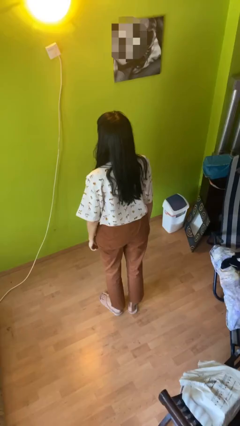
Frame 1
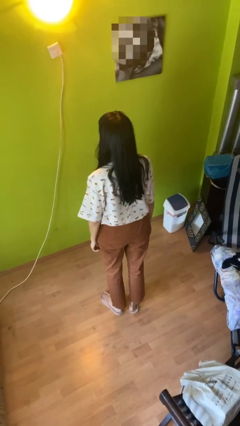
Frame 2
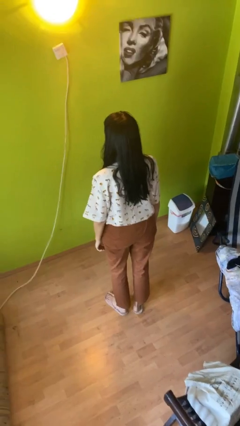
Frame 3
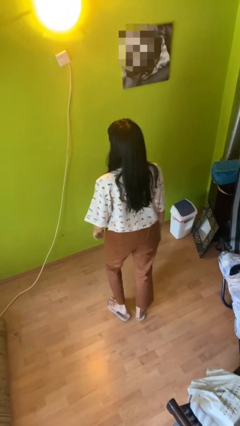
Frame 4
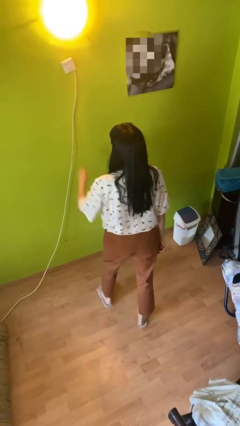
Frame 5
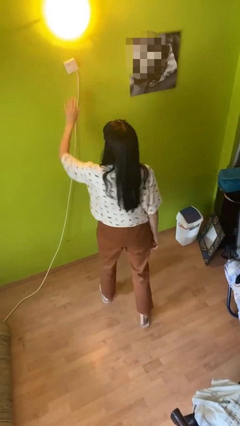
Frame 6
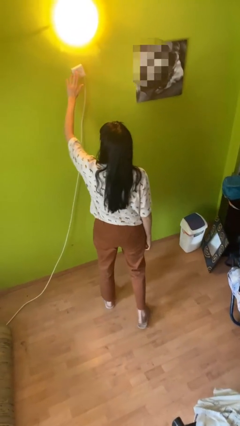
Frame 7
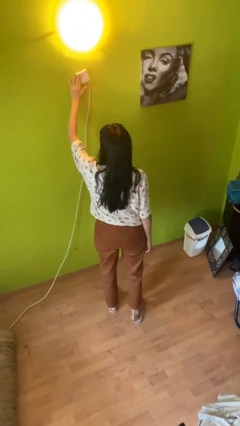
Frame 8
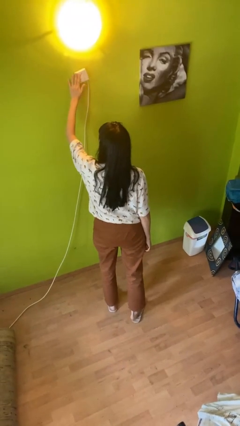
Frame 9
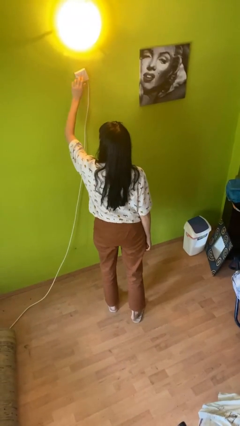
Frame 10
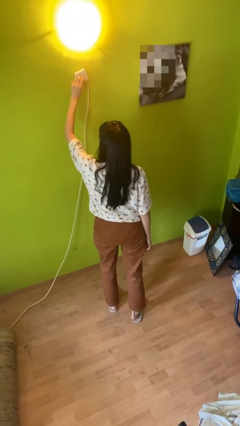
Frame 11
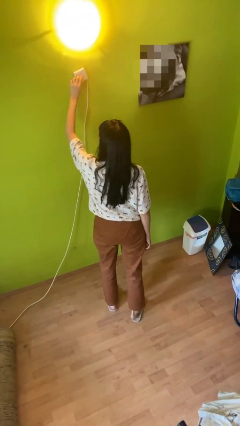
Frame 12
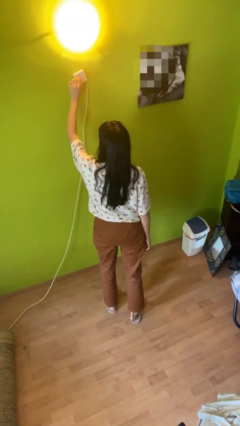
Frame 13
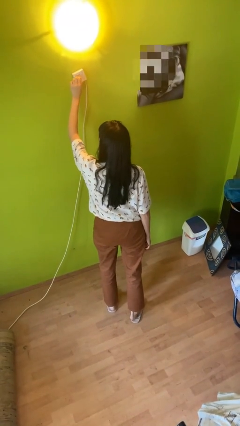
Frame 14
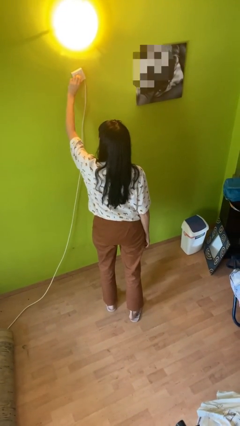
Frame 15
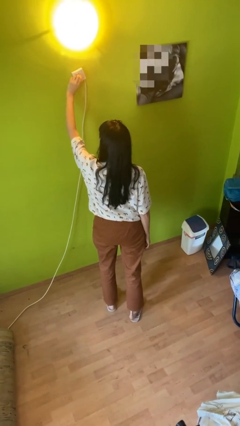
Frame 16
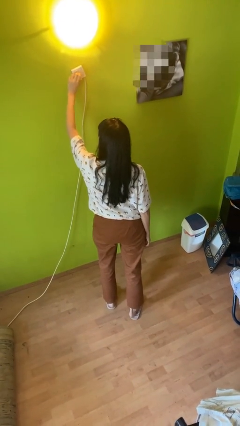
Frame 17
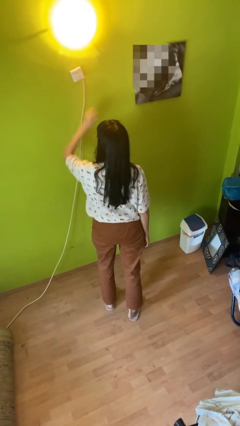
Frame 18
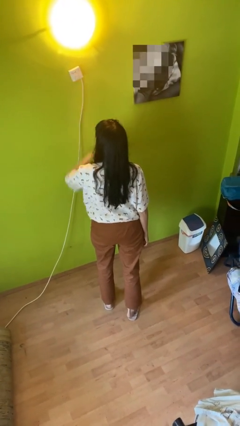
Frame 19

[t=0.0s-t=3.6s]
person adjusts thermostat

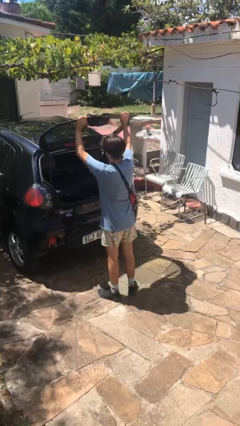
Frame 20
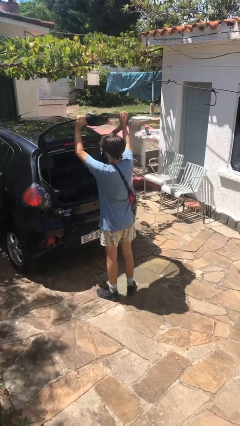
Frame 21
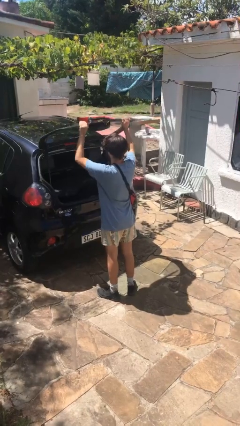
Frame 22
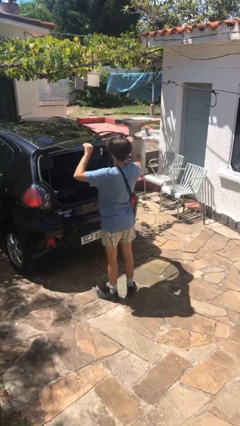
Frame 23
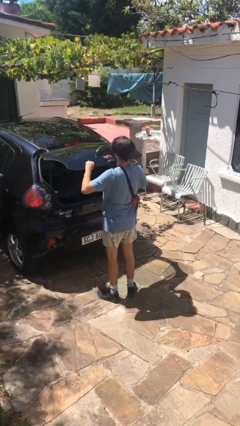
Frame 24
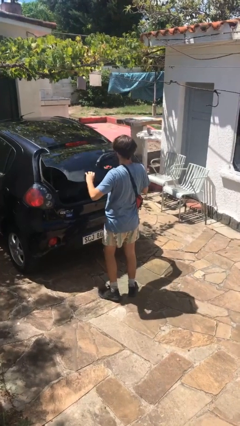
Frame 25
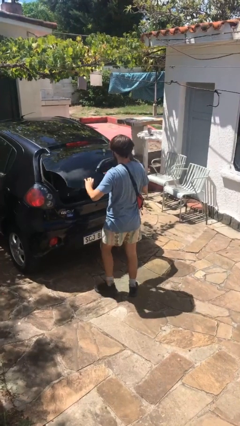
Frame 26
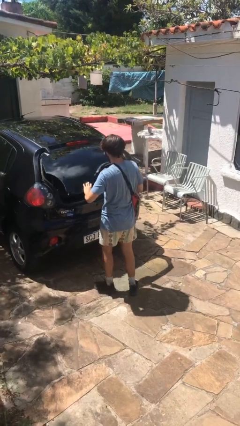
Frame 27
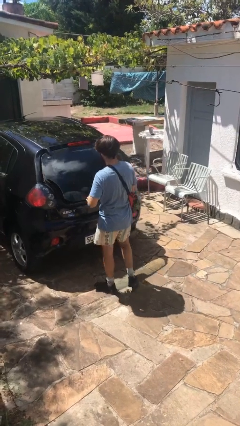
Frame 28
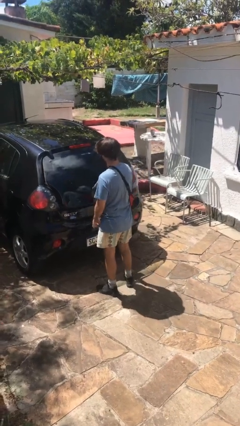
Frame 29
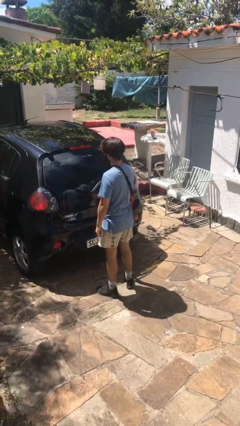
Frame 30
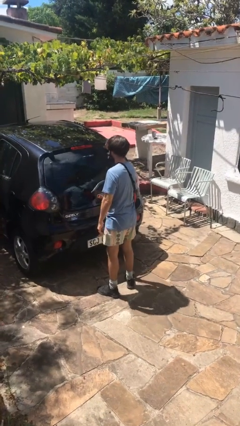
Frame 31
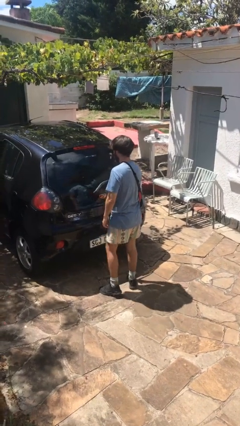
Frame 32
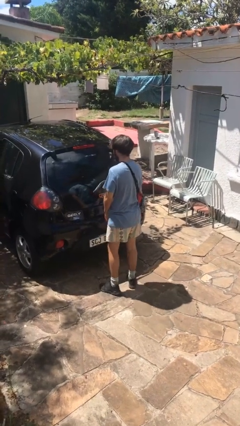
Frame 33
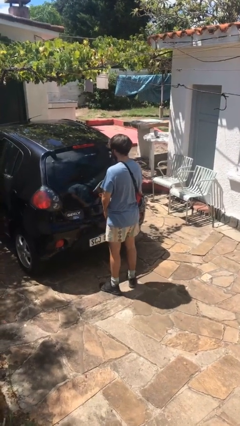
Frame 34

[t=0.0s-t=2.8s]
person closes car trunk

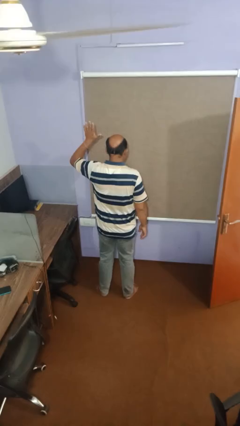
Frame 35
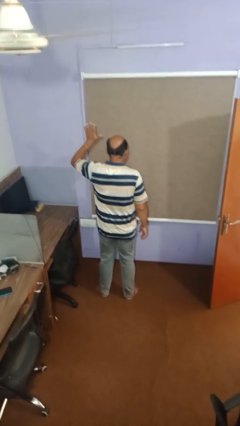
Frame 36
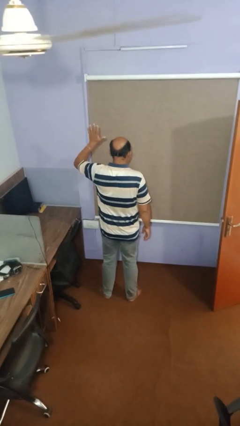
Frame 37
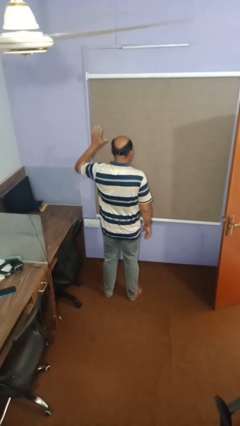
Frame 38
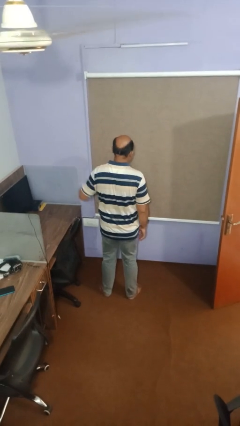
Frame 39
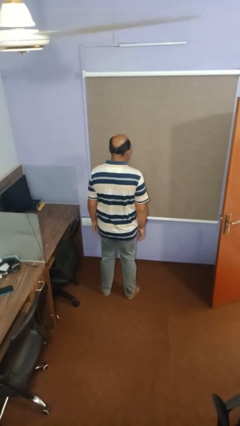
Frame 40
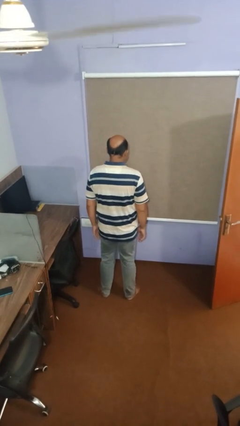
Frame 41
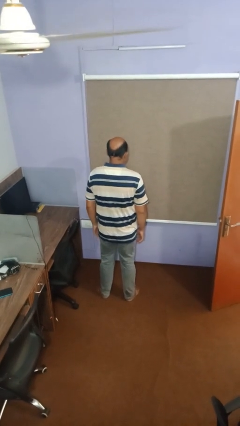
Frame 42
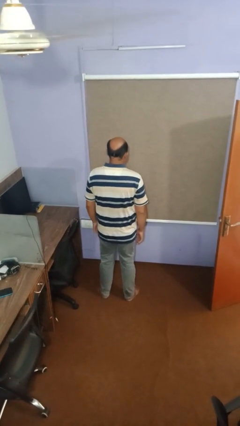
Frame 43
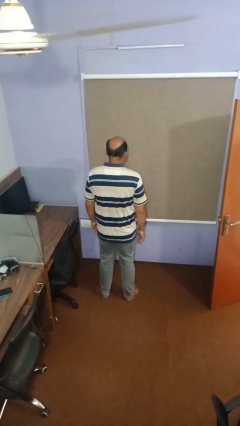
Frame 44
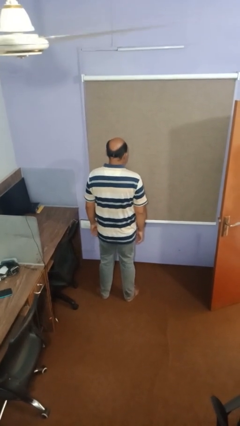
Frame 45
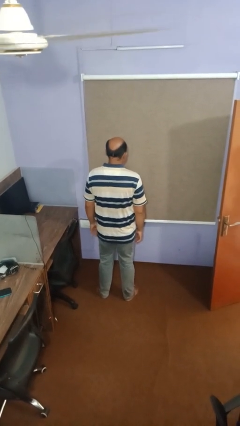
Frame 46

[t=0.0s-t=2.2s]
person gestures lower hand

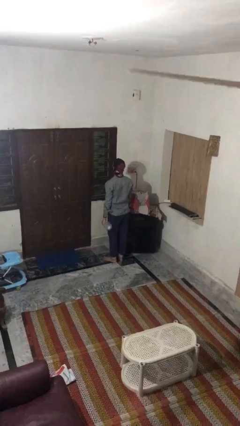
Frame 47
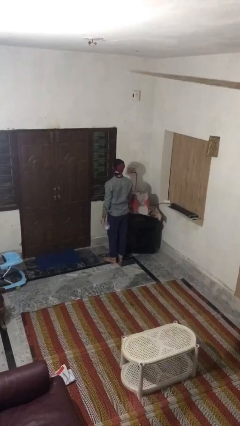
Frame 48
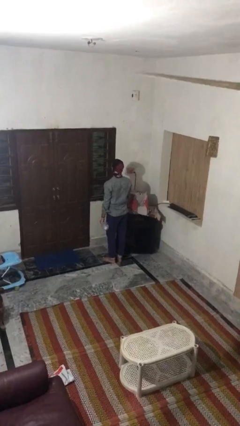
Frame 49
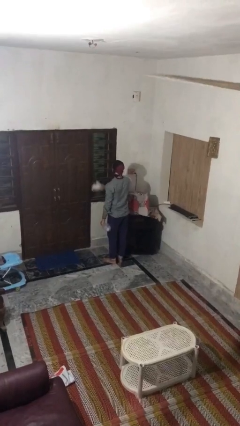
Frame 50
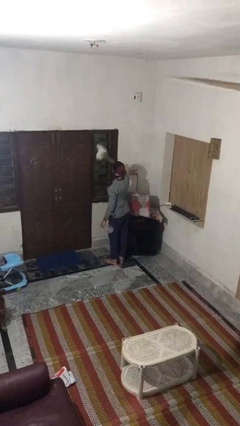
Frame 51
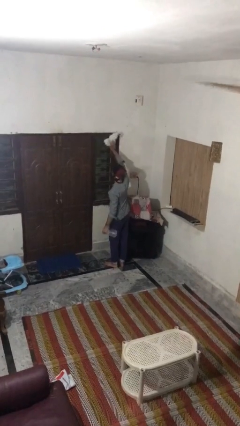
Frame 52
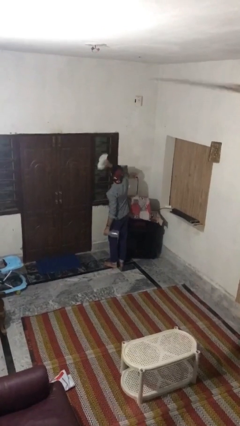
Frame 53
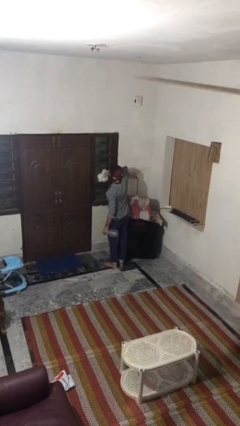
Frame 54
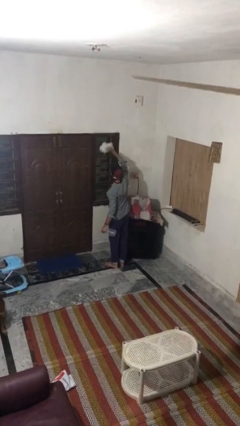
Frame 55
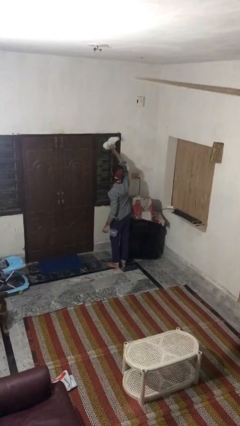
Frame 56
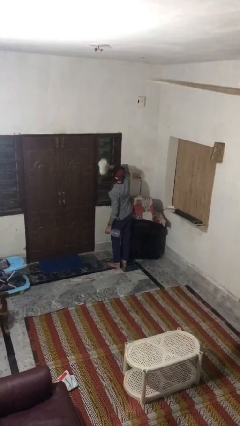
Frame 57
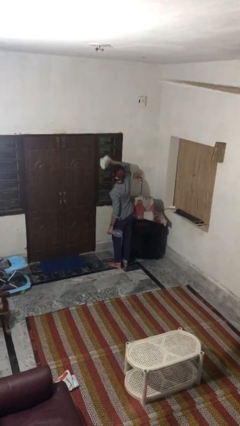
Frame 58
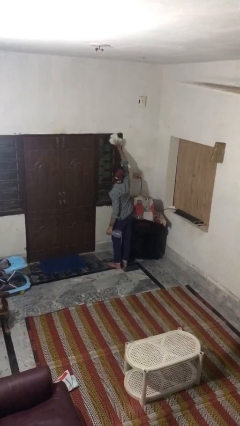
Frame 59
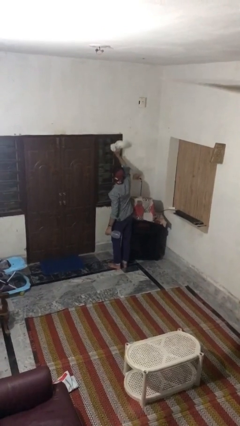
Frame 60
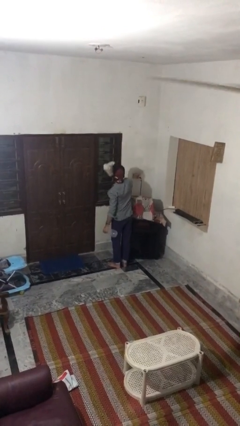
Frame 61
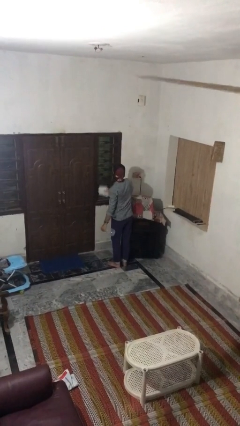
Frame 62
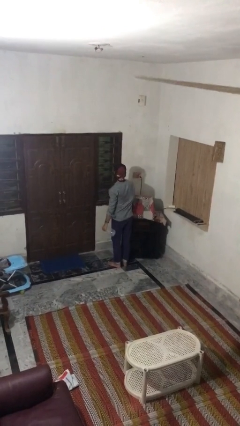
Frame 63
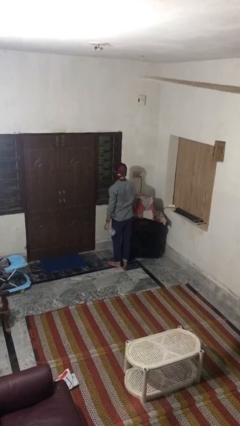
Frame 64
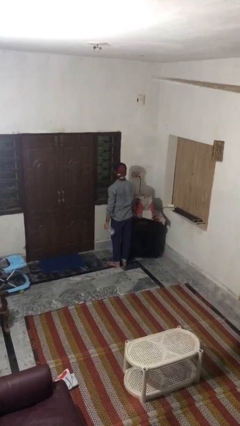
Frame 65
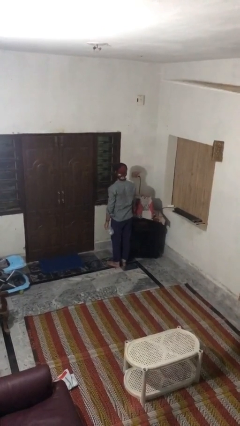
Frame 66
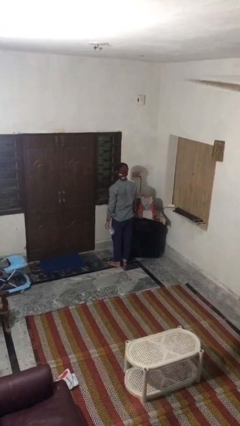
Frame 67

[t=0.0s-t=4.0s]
person washes window

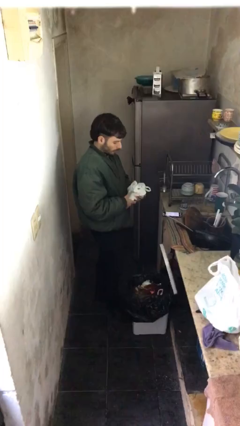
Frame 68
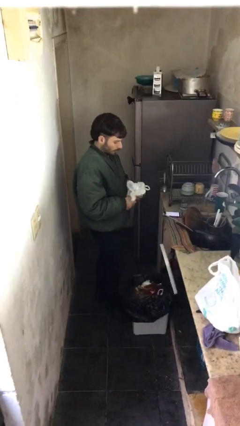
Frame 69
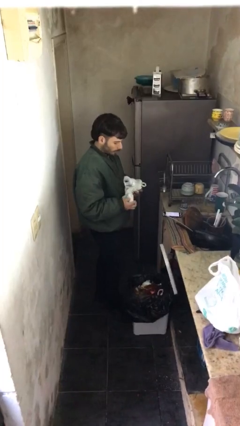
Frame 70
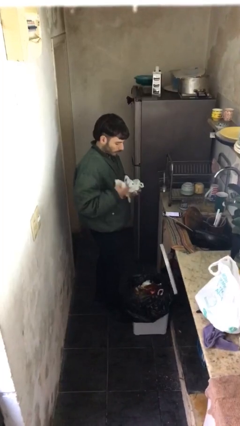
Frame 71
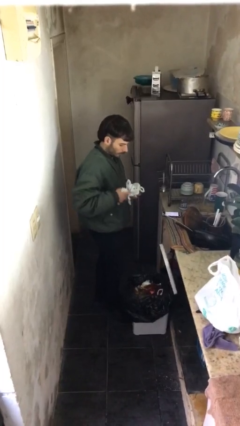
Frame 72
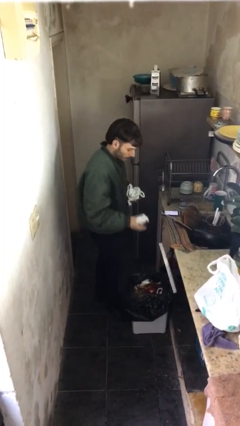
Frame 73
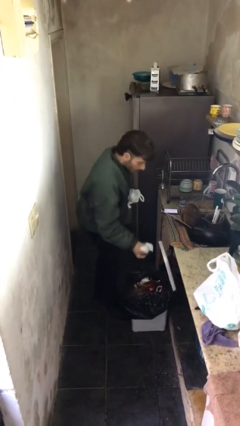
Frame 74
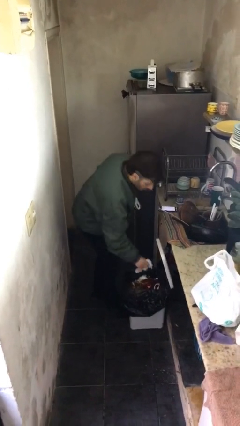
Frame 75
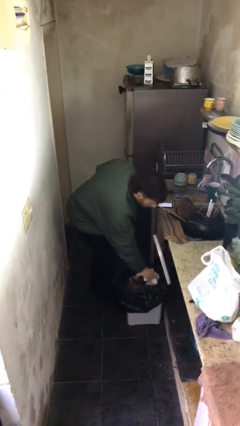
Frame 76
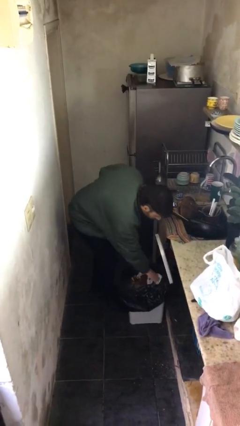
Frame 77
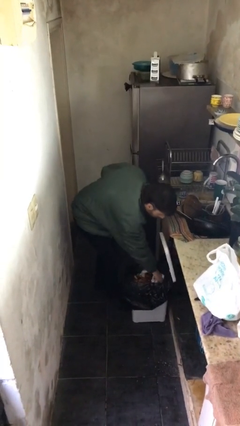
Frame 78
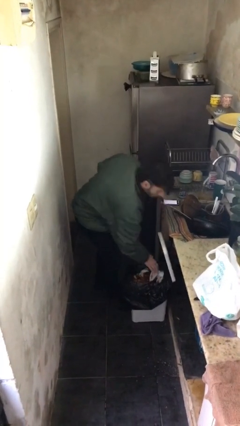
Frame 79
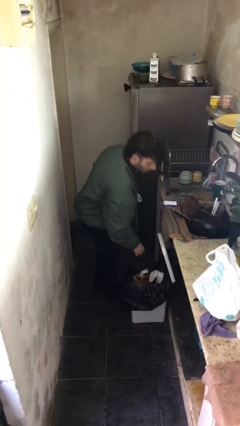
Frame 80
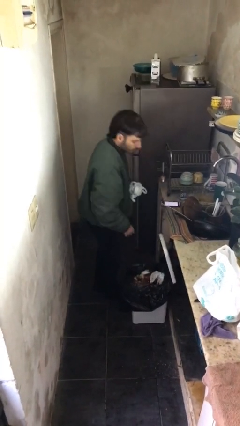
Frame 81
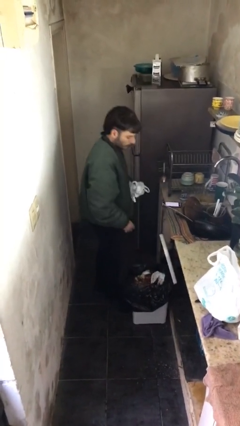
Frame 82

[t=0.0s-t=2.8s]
person discards trash

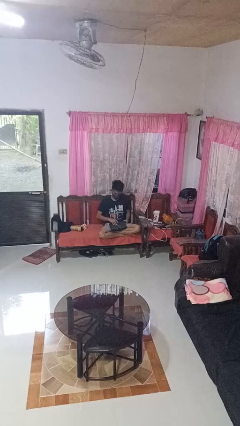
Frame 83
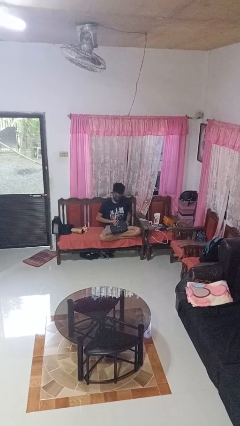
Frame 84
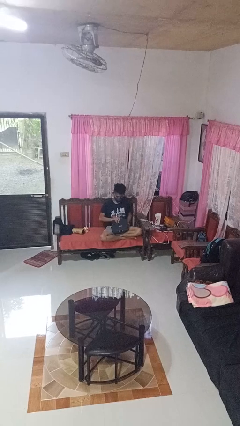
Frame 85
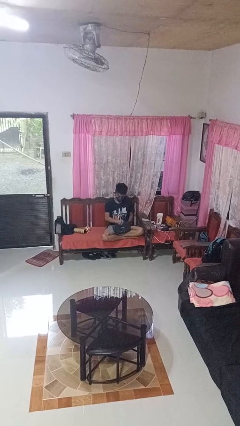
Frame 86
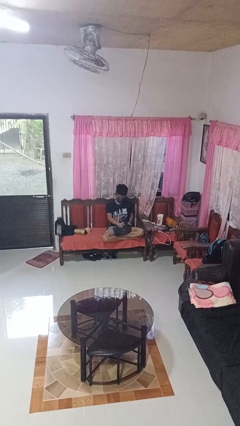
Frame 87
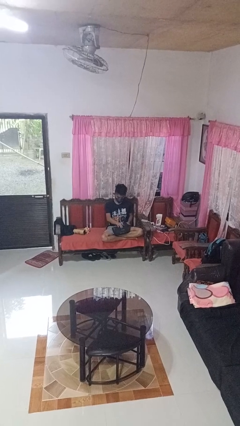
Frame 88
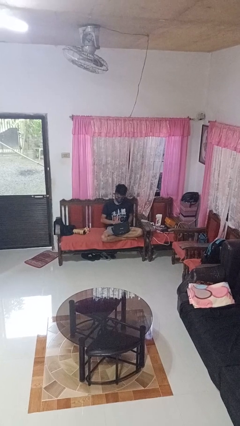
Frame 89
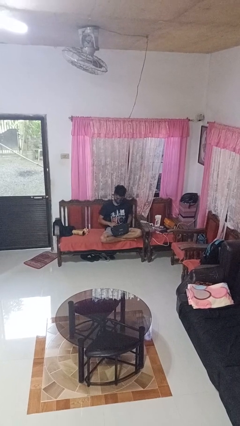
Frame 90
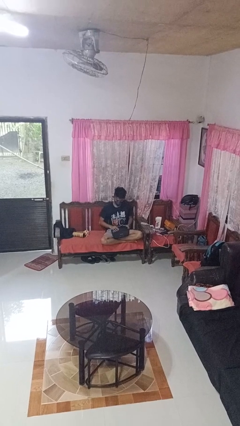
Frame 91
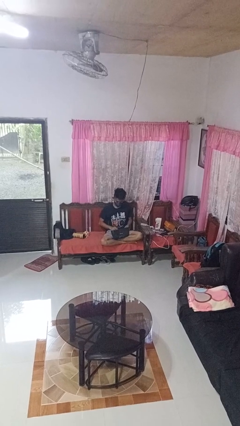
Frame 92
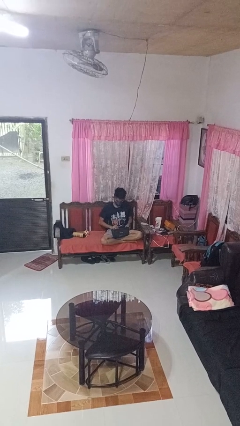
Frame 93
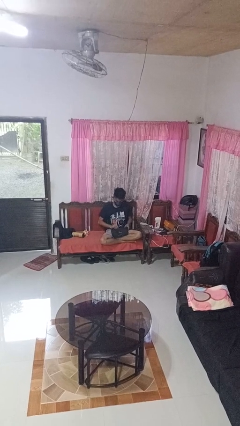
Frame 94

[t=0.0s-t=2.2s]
person opens laptop
